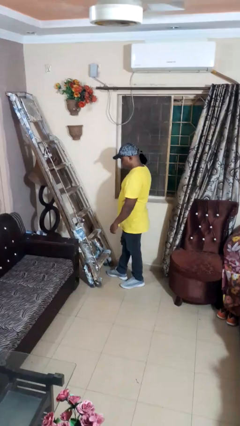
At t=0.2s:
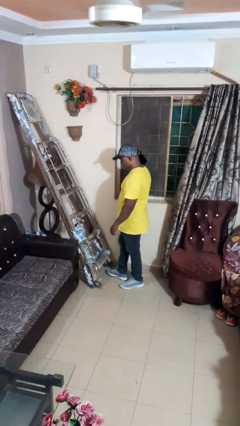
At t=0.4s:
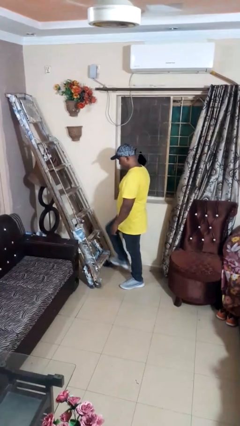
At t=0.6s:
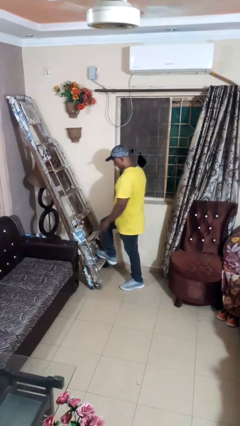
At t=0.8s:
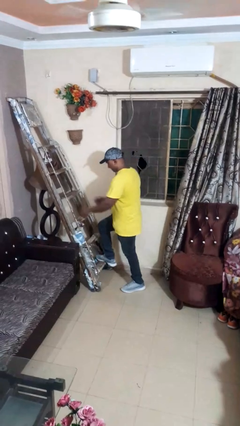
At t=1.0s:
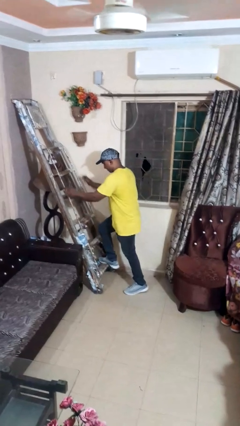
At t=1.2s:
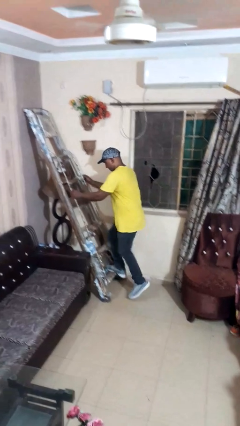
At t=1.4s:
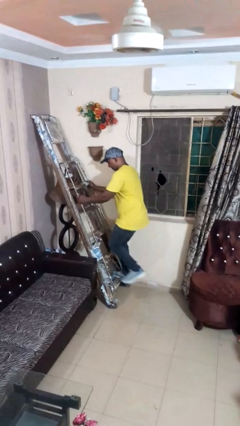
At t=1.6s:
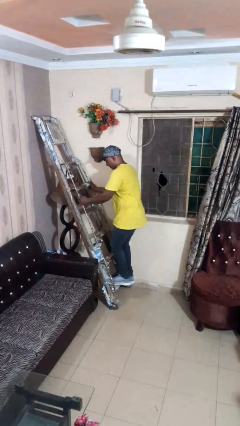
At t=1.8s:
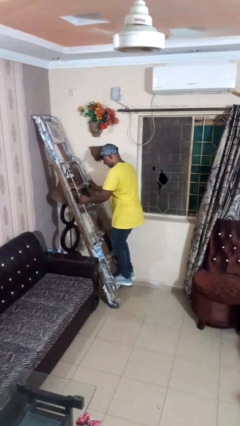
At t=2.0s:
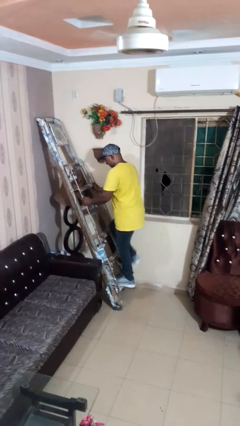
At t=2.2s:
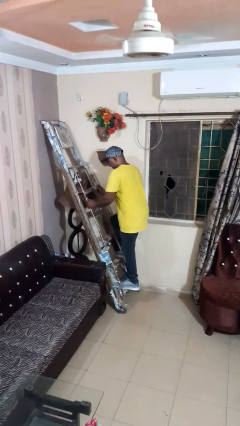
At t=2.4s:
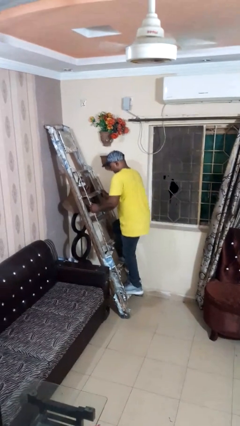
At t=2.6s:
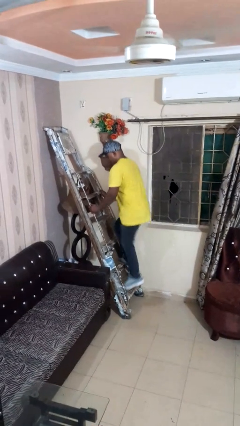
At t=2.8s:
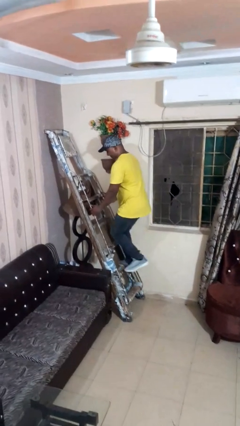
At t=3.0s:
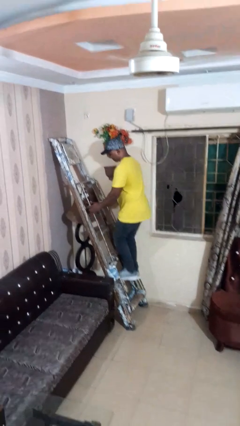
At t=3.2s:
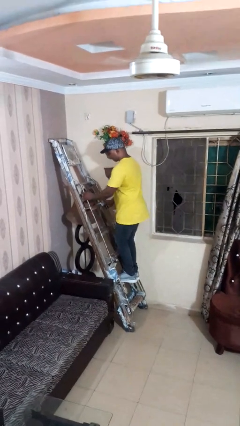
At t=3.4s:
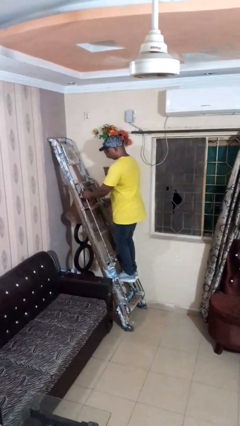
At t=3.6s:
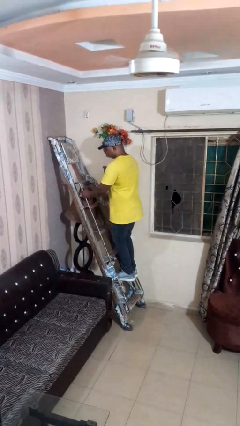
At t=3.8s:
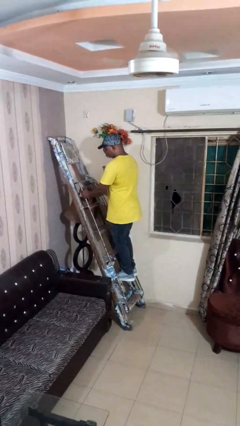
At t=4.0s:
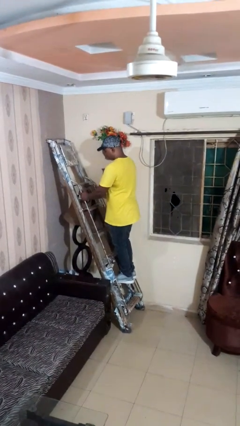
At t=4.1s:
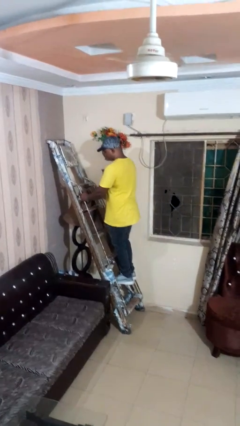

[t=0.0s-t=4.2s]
person climbs up ladder

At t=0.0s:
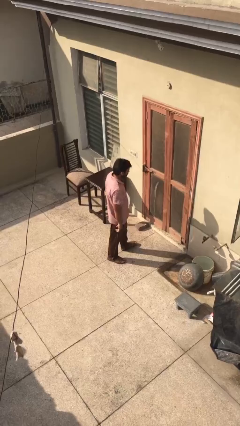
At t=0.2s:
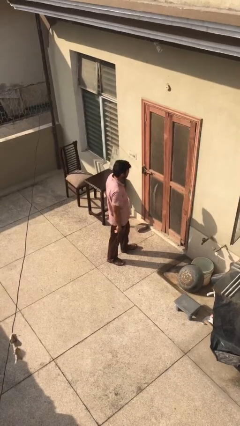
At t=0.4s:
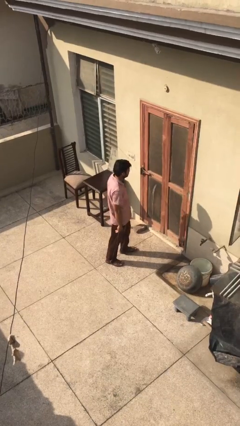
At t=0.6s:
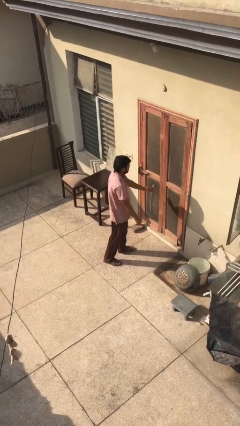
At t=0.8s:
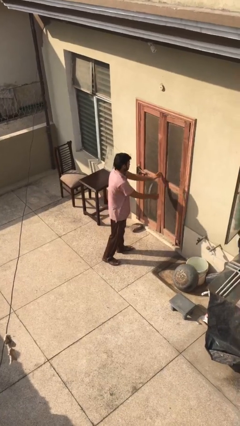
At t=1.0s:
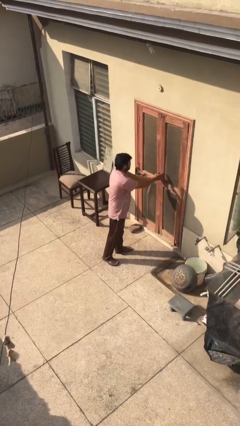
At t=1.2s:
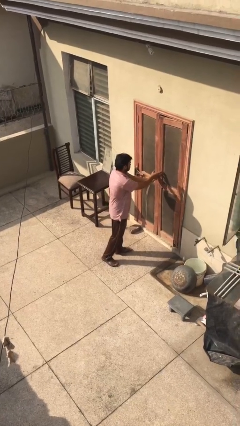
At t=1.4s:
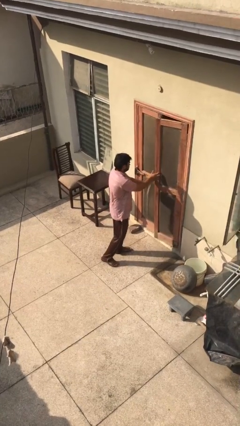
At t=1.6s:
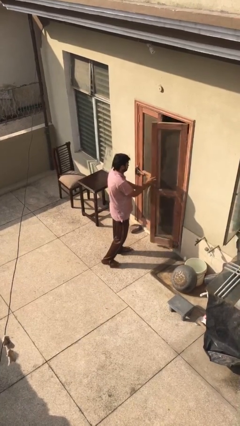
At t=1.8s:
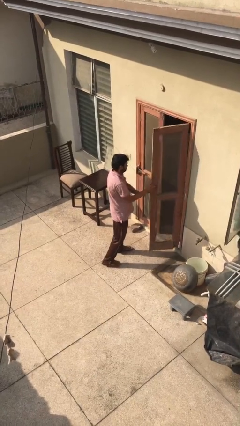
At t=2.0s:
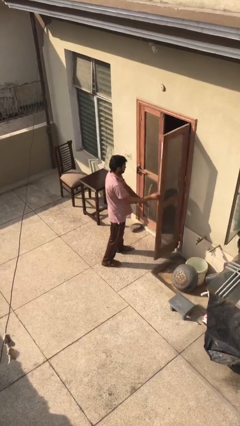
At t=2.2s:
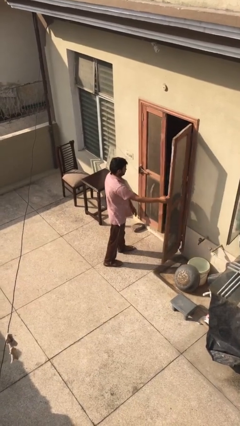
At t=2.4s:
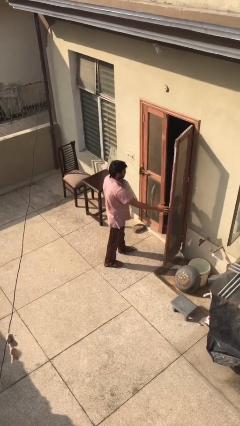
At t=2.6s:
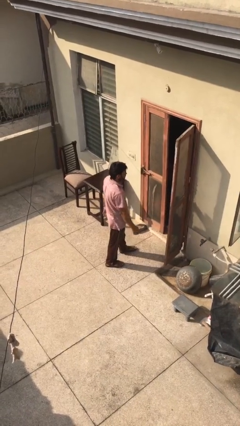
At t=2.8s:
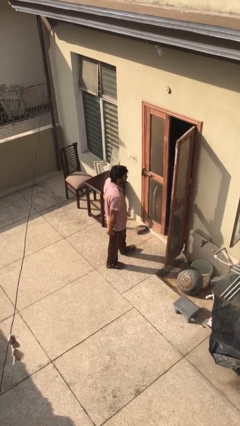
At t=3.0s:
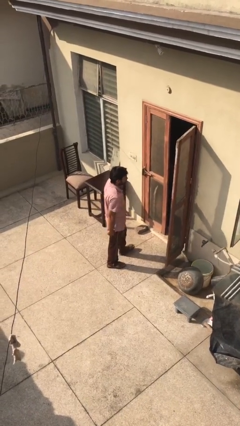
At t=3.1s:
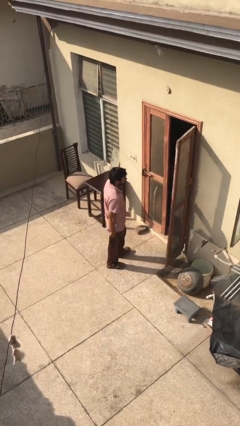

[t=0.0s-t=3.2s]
person opens facility door

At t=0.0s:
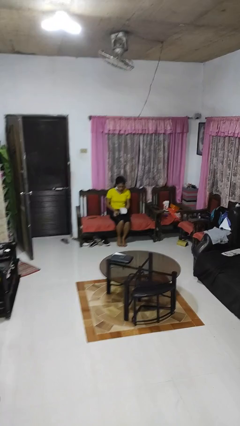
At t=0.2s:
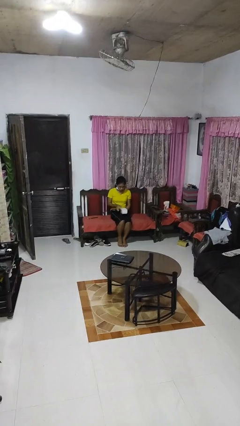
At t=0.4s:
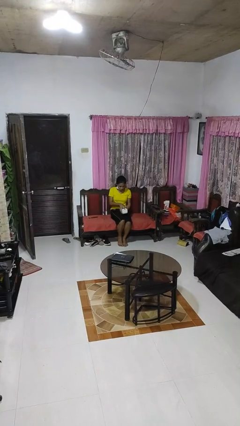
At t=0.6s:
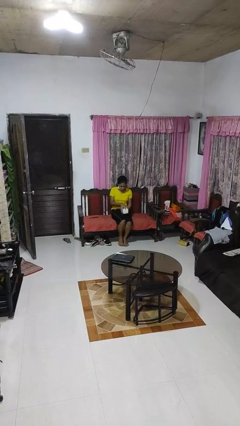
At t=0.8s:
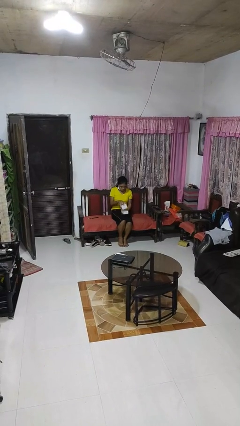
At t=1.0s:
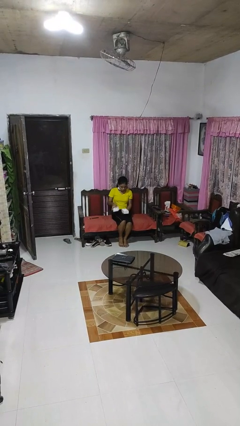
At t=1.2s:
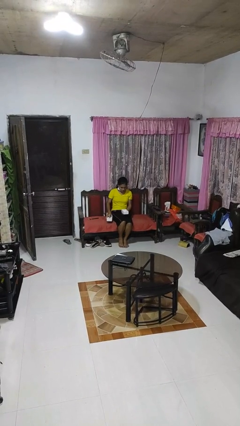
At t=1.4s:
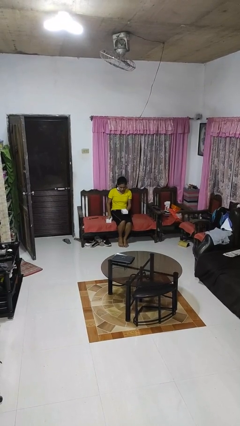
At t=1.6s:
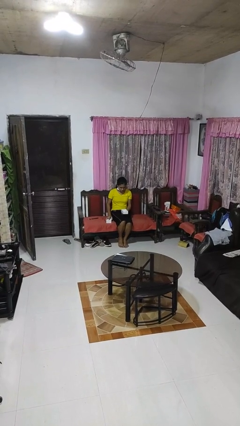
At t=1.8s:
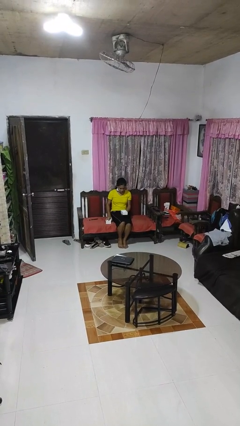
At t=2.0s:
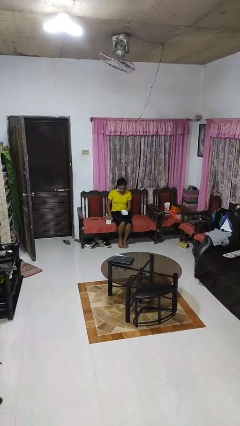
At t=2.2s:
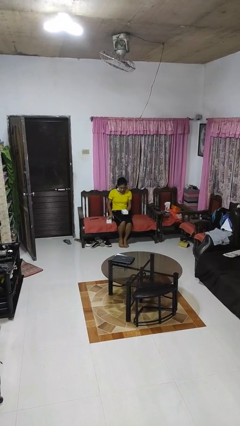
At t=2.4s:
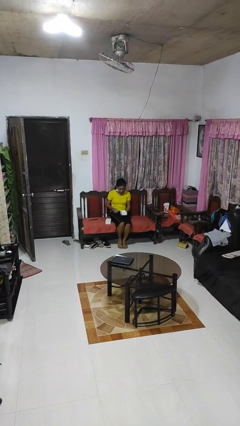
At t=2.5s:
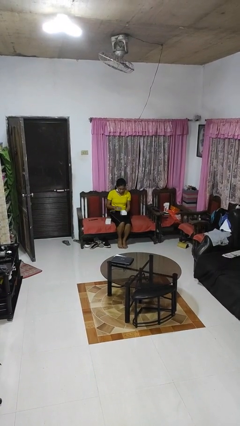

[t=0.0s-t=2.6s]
person opens jewelry box

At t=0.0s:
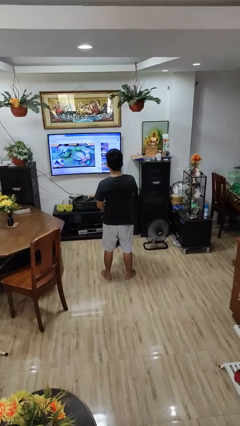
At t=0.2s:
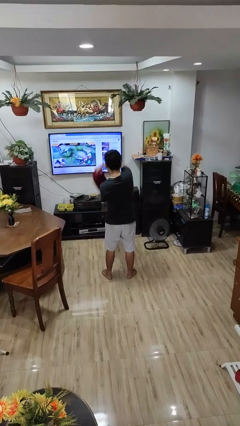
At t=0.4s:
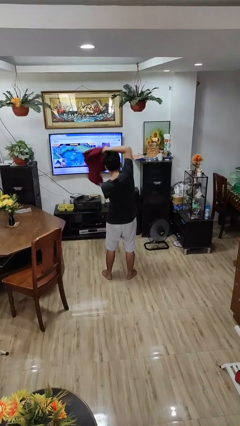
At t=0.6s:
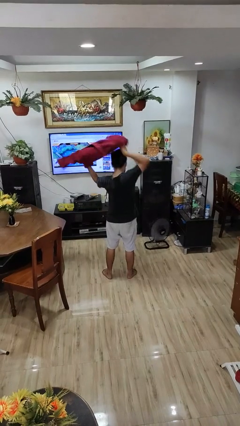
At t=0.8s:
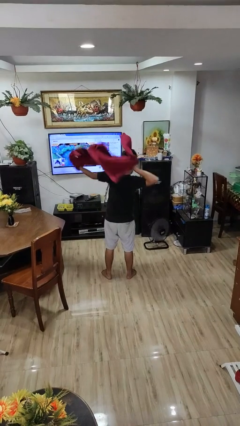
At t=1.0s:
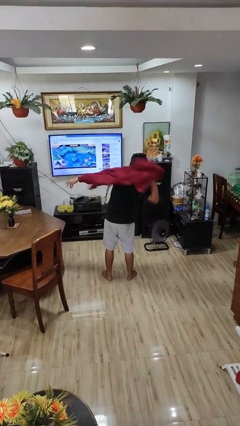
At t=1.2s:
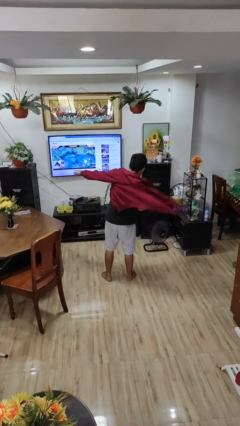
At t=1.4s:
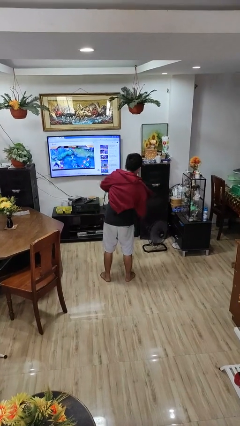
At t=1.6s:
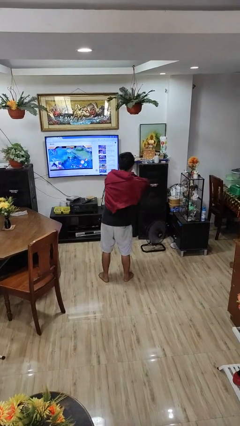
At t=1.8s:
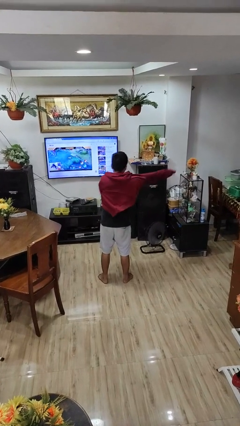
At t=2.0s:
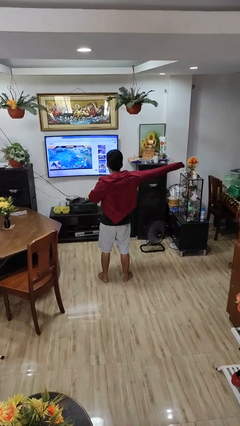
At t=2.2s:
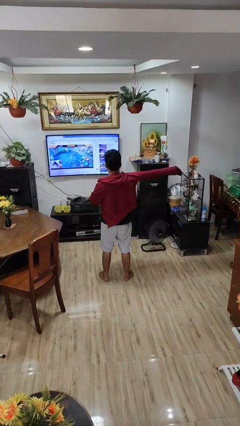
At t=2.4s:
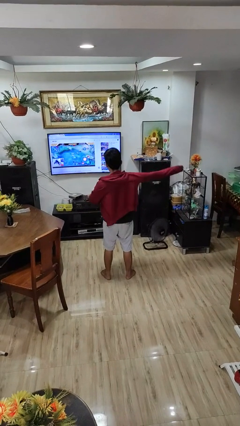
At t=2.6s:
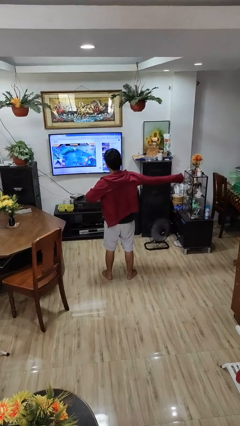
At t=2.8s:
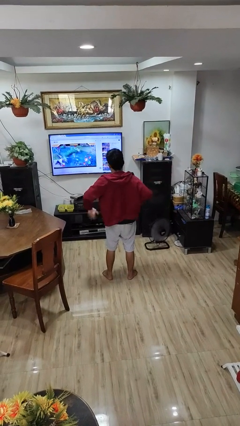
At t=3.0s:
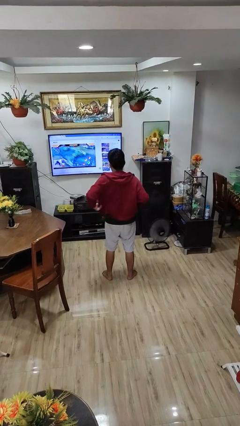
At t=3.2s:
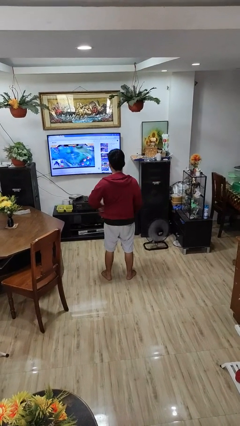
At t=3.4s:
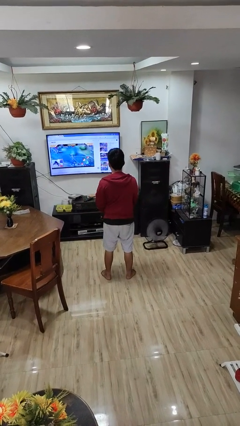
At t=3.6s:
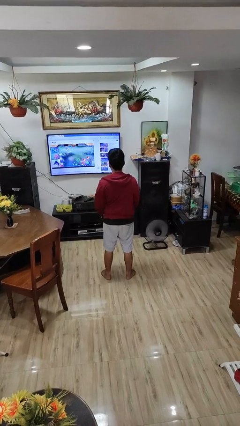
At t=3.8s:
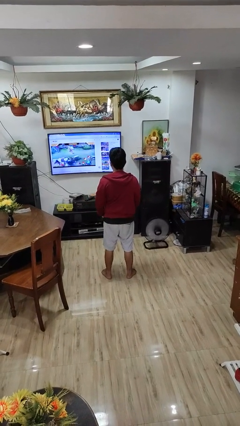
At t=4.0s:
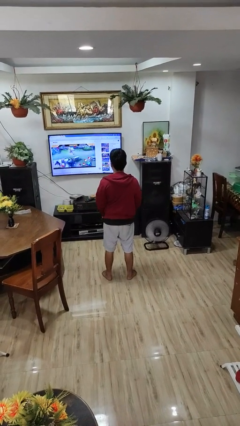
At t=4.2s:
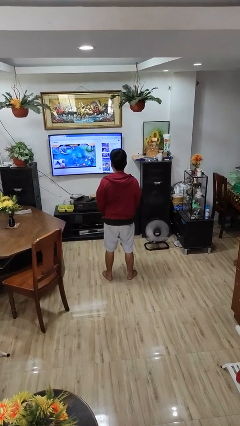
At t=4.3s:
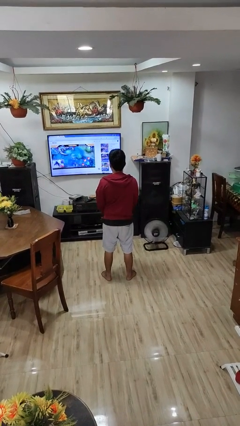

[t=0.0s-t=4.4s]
person puts on jacket

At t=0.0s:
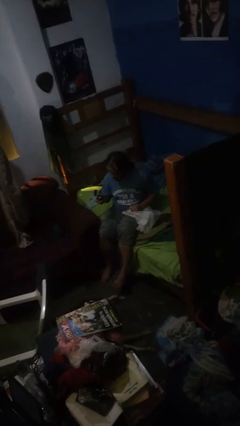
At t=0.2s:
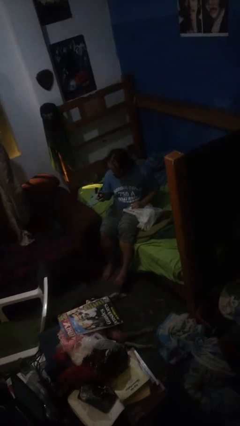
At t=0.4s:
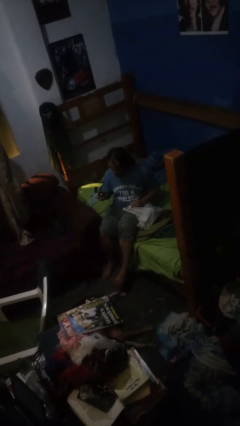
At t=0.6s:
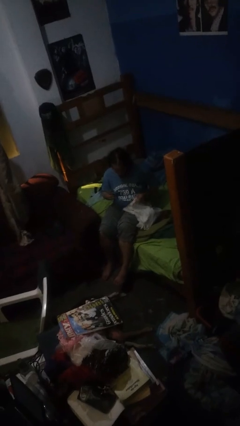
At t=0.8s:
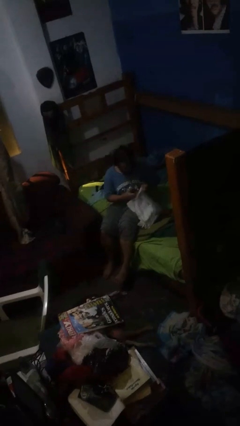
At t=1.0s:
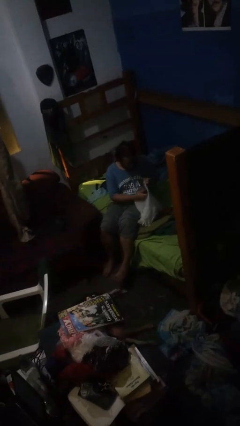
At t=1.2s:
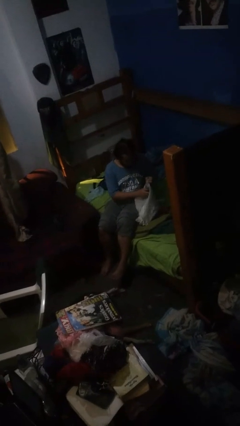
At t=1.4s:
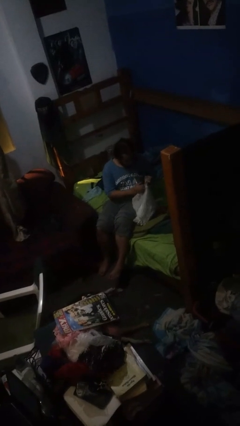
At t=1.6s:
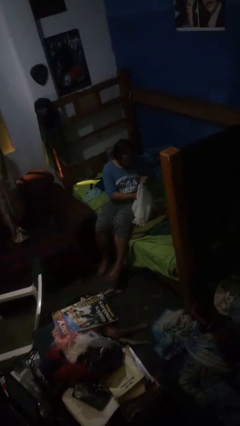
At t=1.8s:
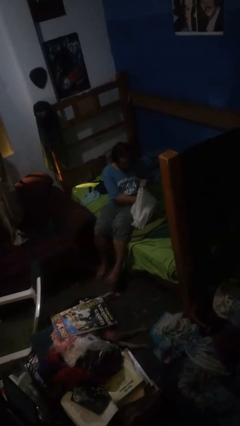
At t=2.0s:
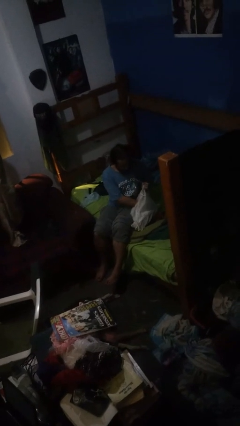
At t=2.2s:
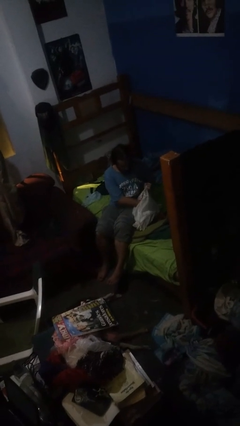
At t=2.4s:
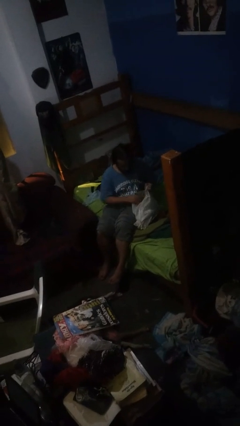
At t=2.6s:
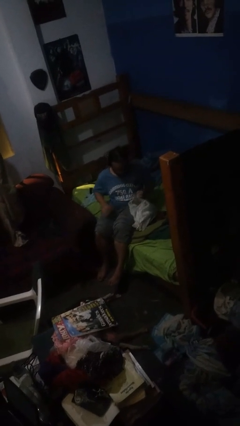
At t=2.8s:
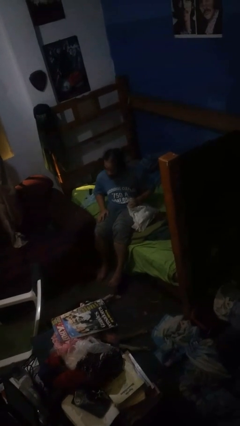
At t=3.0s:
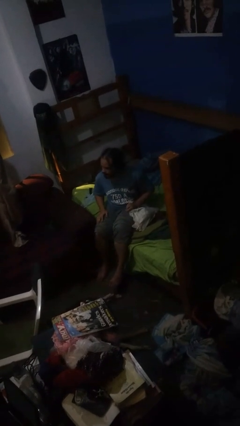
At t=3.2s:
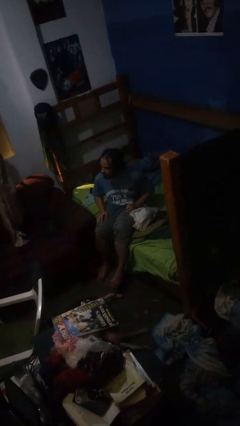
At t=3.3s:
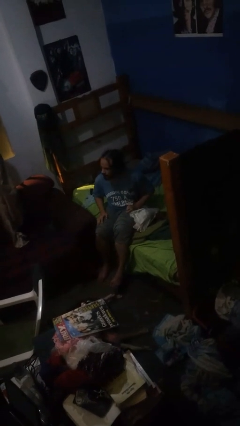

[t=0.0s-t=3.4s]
person puts object into bag
